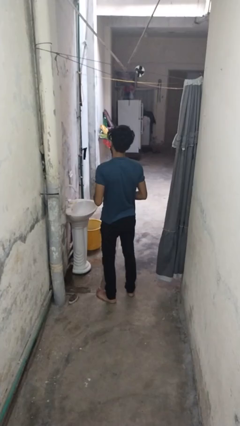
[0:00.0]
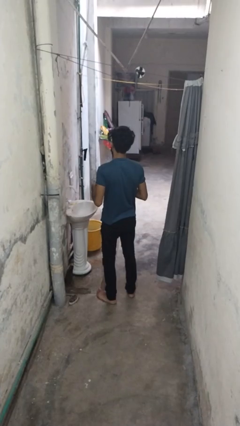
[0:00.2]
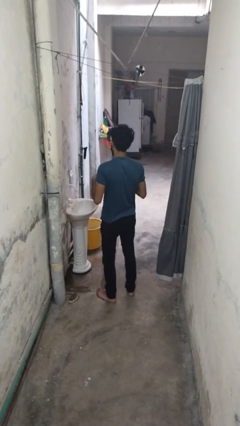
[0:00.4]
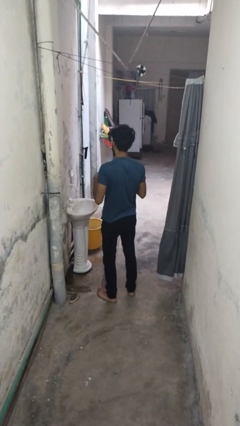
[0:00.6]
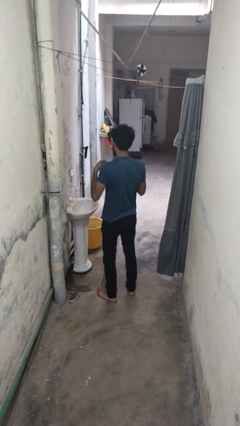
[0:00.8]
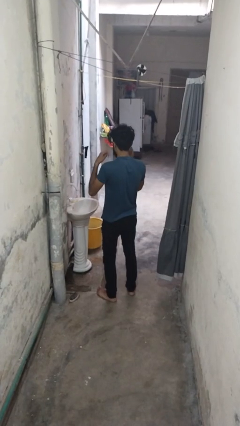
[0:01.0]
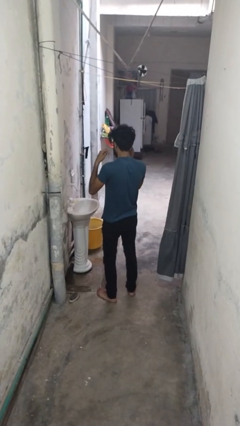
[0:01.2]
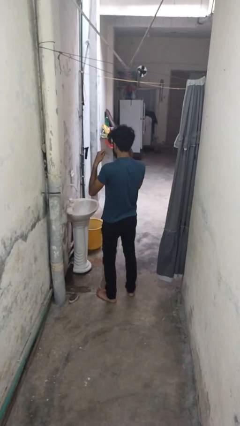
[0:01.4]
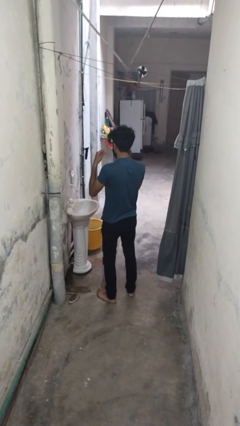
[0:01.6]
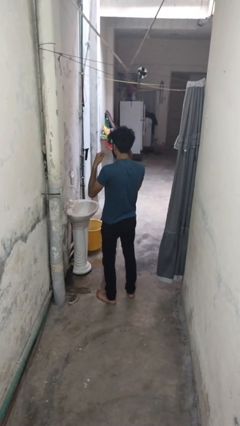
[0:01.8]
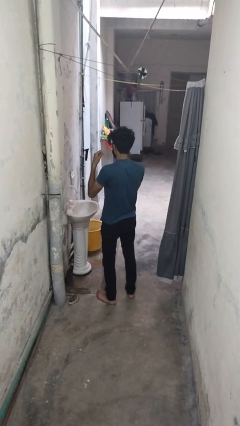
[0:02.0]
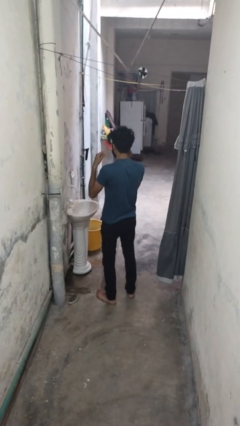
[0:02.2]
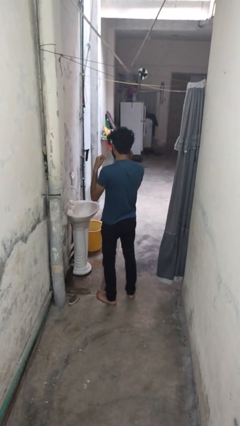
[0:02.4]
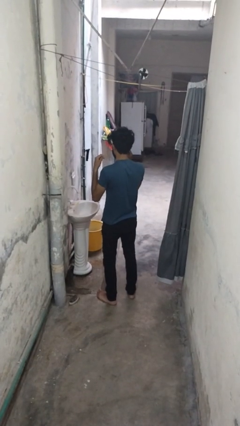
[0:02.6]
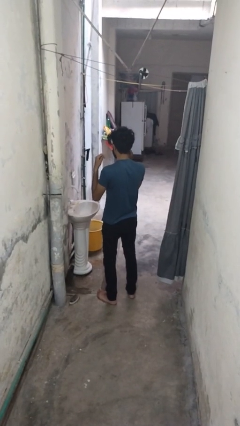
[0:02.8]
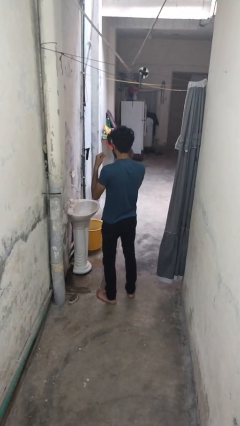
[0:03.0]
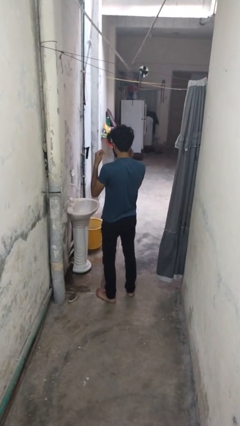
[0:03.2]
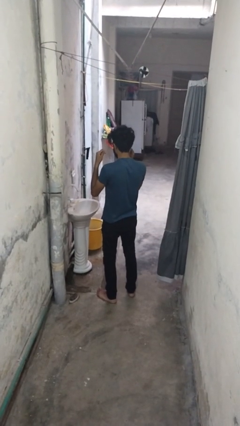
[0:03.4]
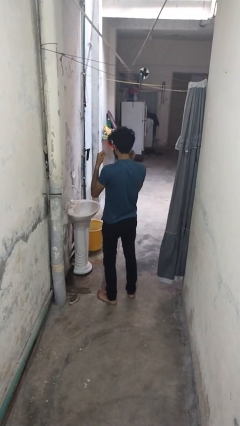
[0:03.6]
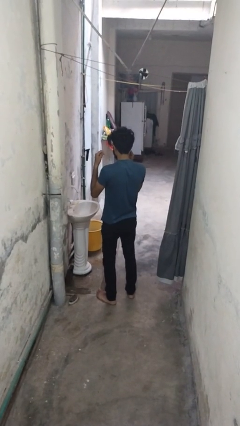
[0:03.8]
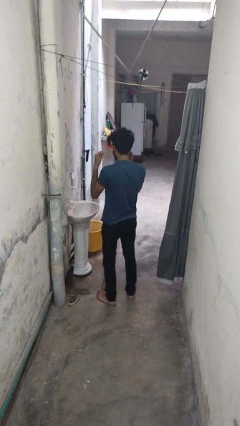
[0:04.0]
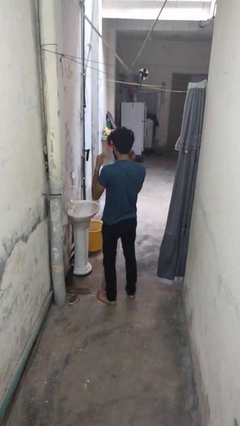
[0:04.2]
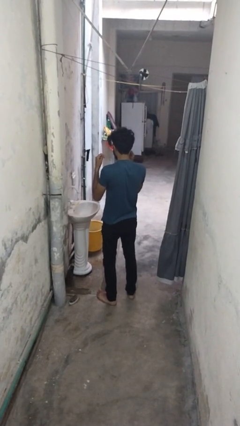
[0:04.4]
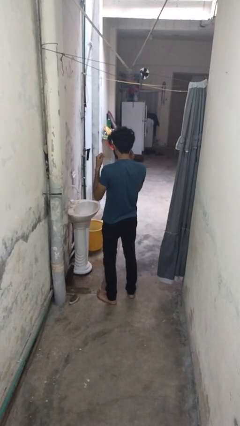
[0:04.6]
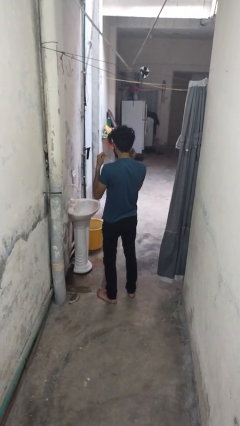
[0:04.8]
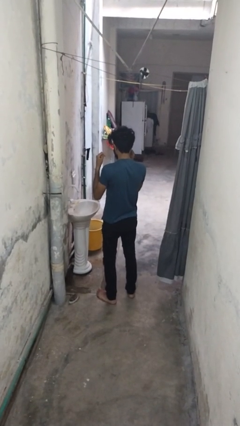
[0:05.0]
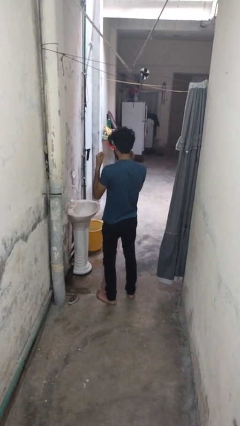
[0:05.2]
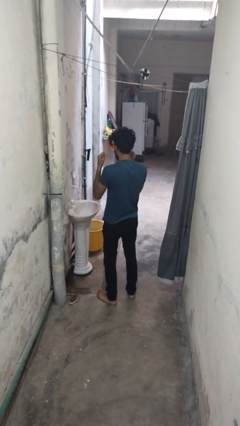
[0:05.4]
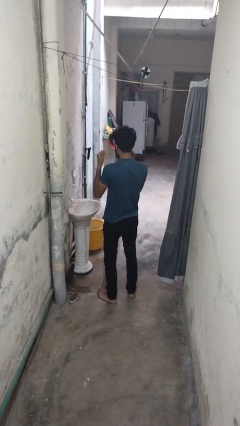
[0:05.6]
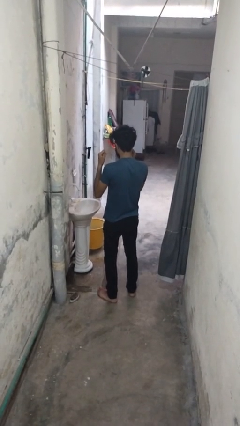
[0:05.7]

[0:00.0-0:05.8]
person flosses

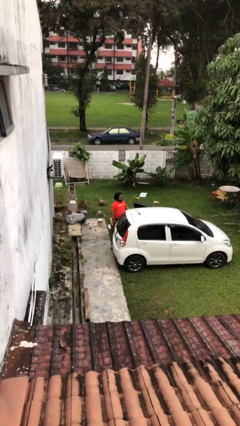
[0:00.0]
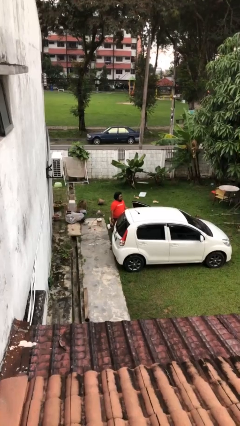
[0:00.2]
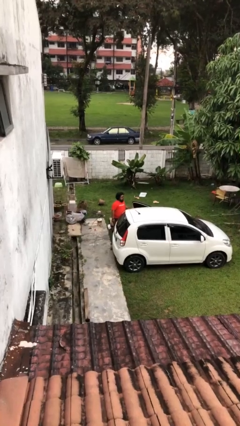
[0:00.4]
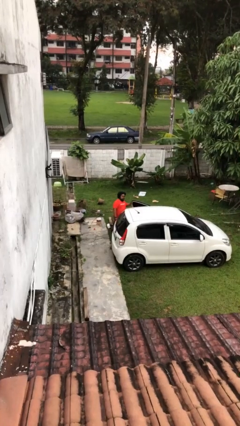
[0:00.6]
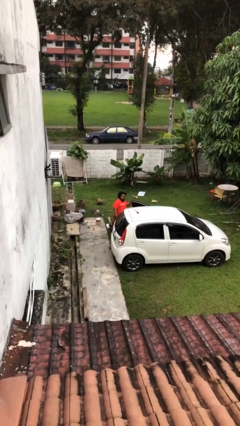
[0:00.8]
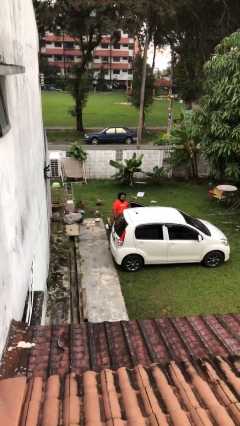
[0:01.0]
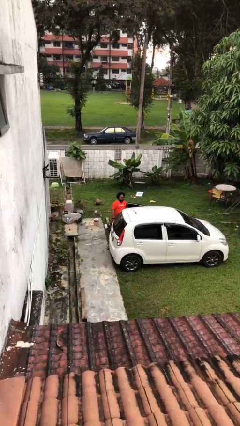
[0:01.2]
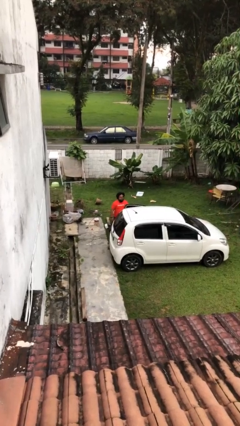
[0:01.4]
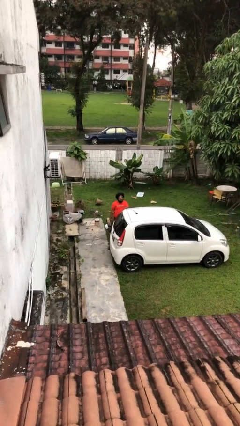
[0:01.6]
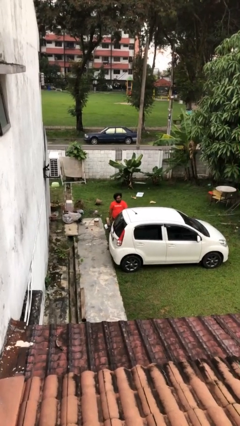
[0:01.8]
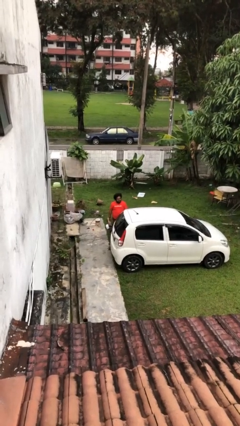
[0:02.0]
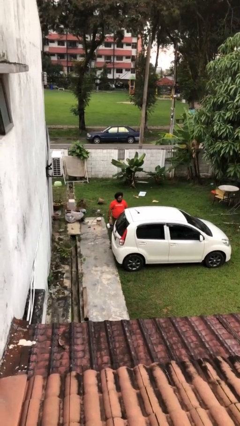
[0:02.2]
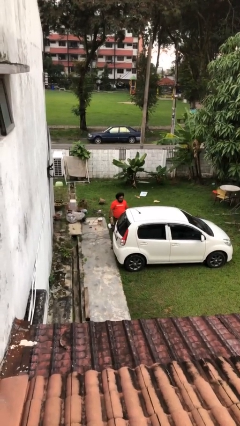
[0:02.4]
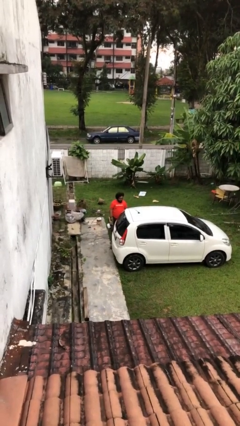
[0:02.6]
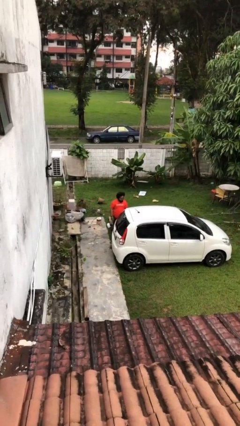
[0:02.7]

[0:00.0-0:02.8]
person closes car door

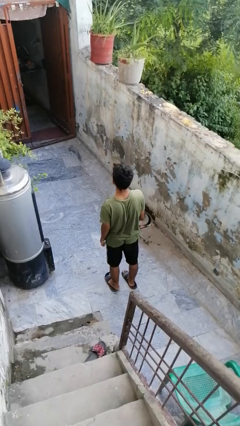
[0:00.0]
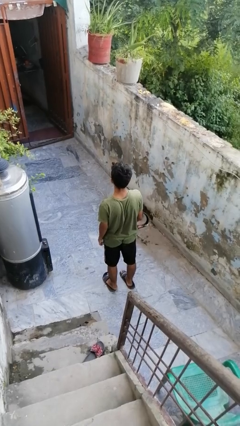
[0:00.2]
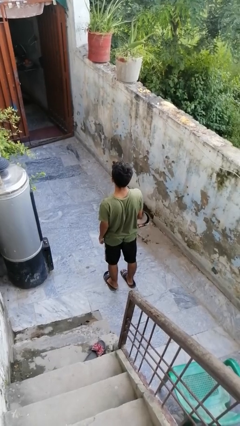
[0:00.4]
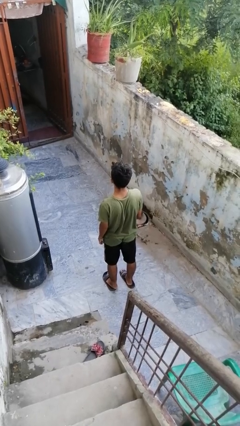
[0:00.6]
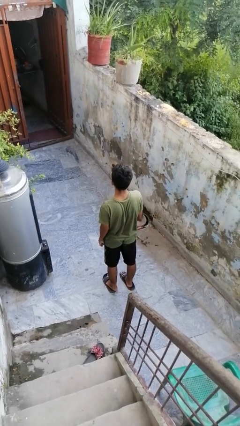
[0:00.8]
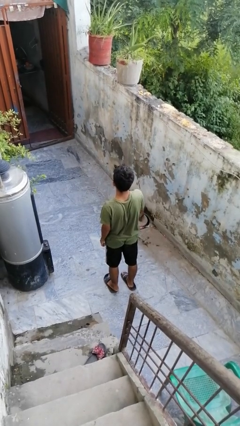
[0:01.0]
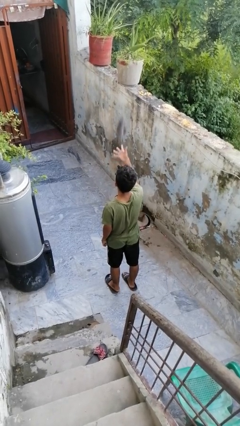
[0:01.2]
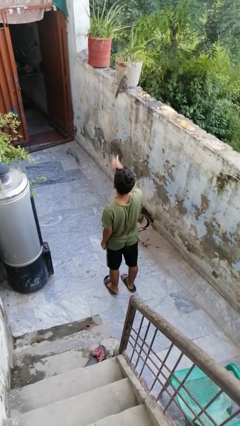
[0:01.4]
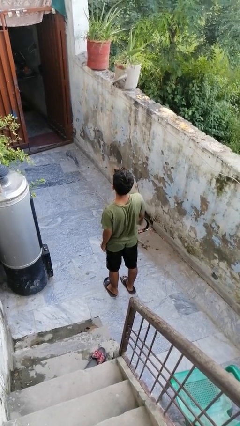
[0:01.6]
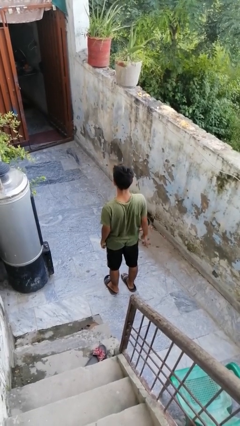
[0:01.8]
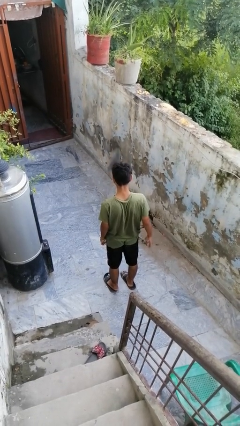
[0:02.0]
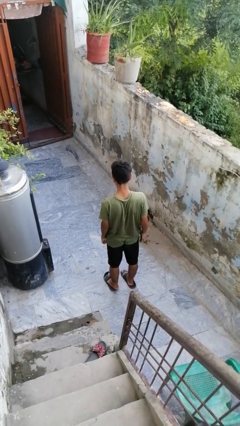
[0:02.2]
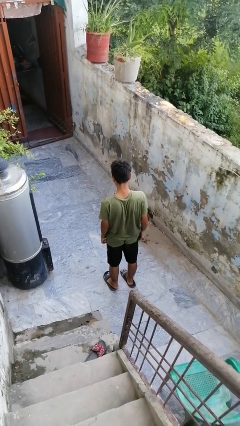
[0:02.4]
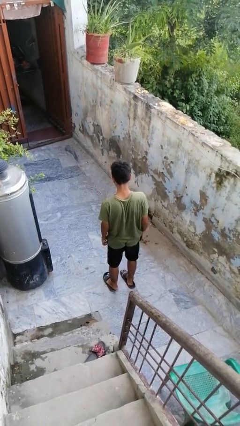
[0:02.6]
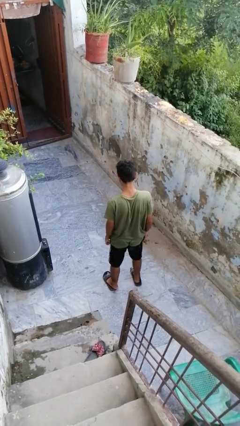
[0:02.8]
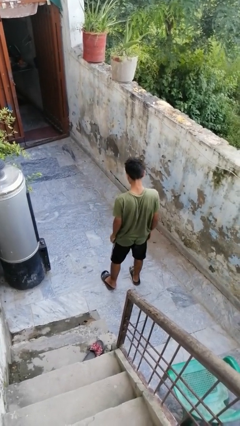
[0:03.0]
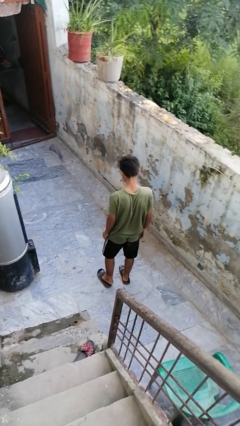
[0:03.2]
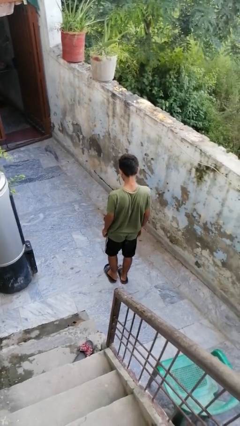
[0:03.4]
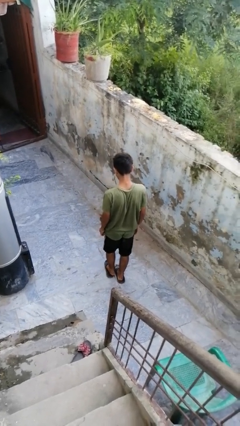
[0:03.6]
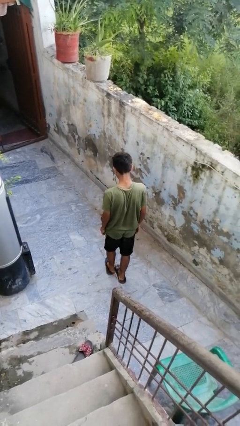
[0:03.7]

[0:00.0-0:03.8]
person throws object into air

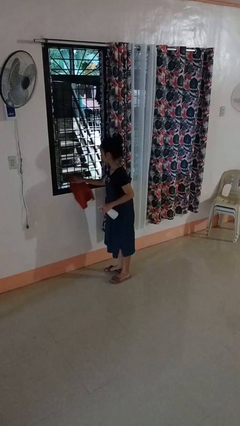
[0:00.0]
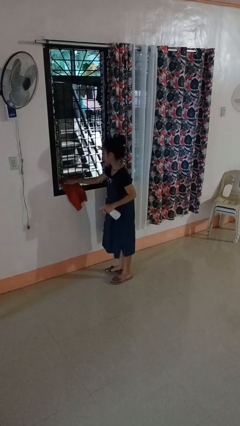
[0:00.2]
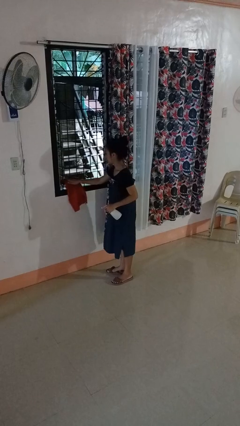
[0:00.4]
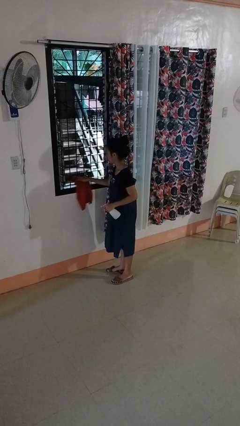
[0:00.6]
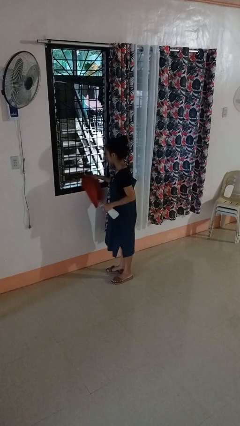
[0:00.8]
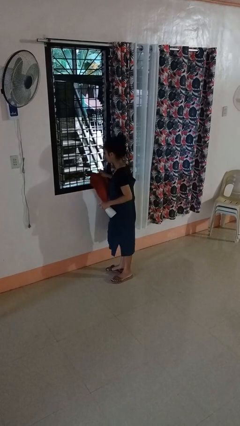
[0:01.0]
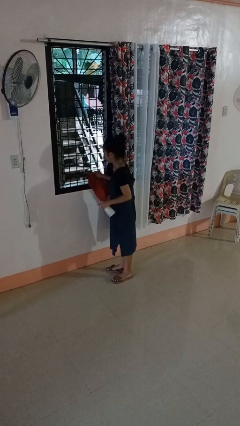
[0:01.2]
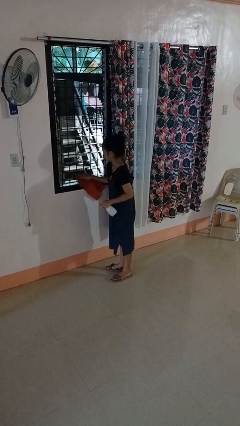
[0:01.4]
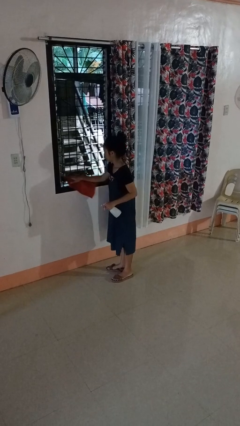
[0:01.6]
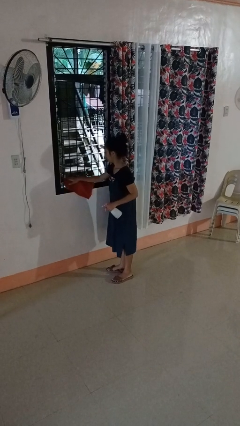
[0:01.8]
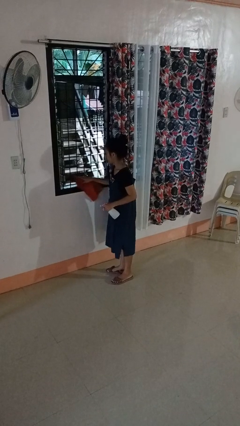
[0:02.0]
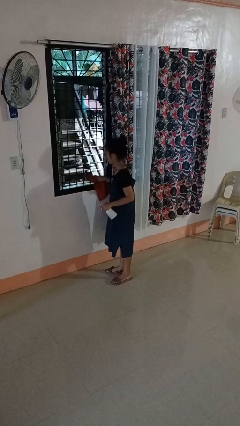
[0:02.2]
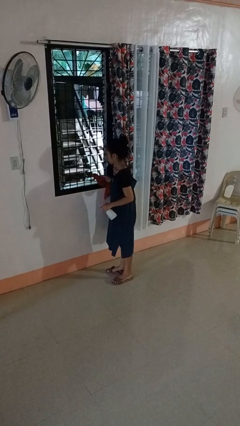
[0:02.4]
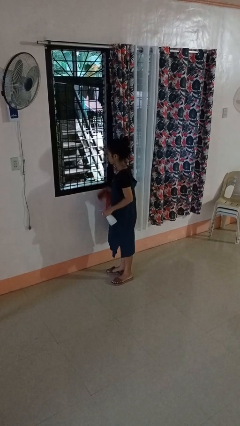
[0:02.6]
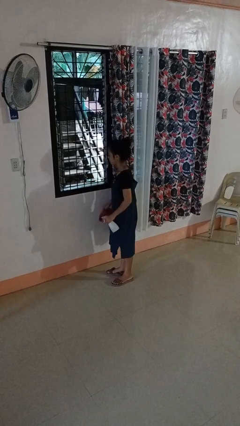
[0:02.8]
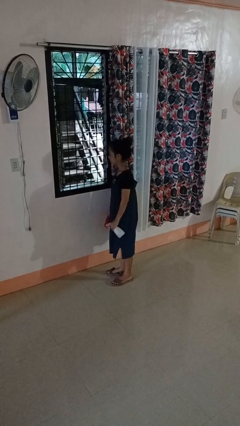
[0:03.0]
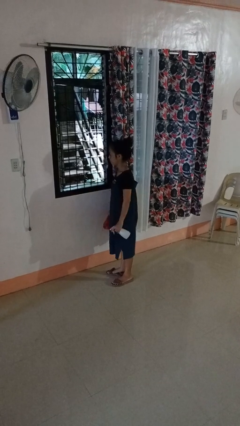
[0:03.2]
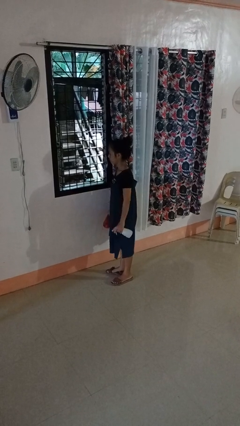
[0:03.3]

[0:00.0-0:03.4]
person washes window

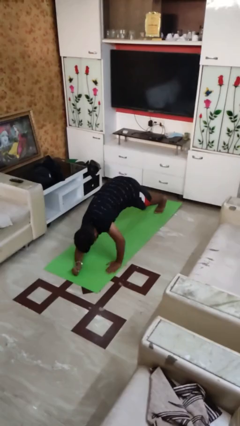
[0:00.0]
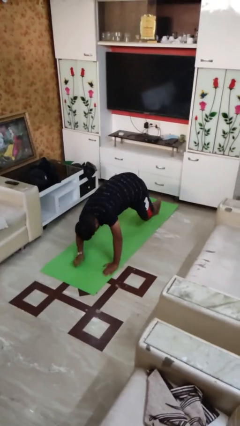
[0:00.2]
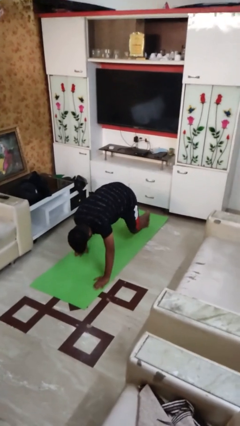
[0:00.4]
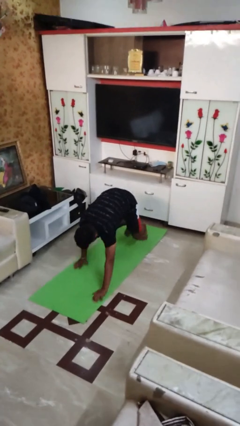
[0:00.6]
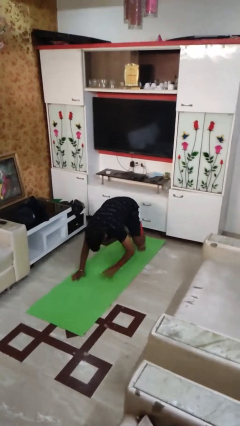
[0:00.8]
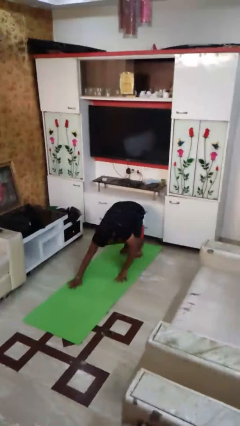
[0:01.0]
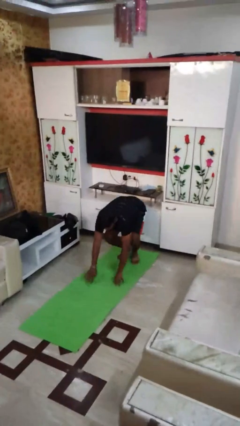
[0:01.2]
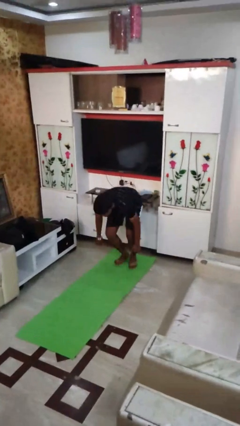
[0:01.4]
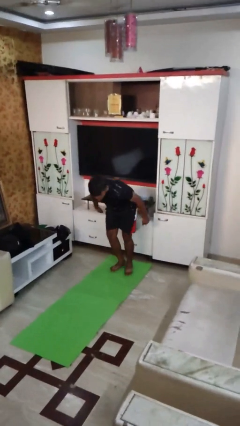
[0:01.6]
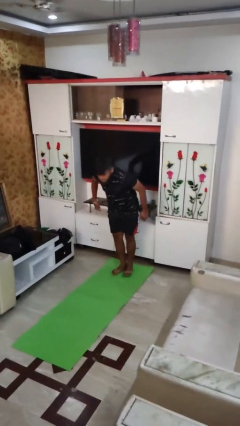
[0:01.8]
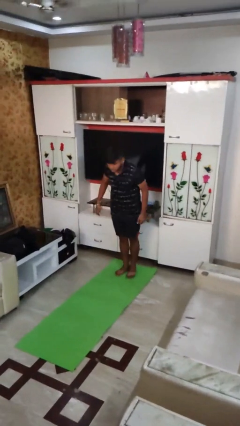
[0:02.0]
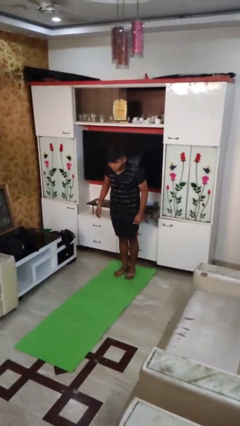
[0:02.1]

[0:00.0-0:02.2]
person stands up from floor
